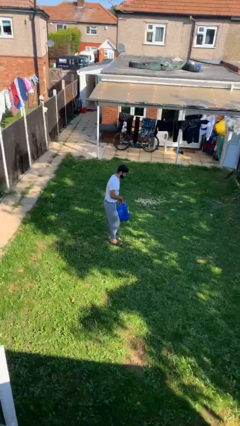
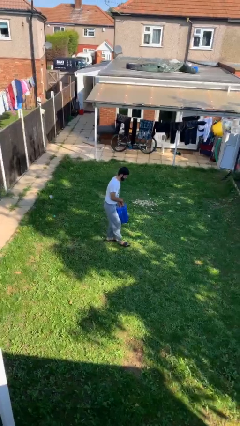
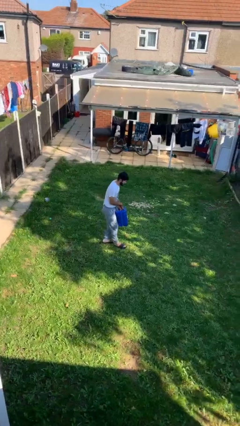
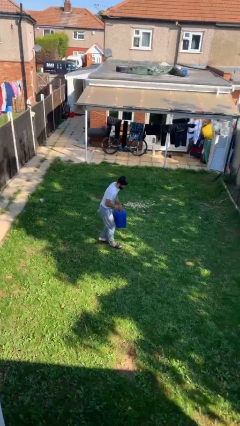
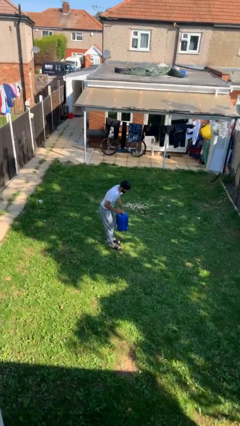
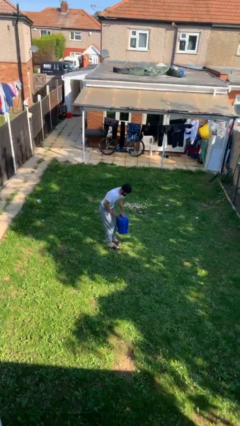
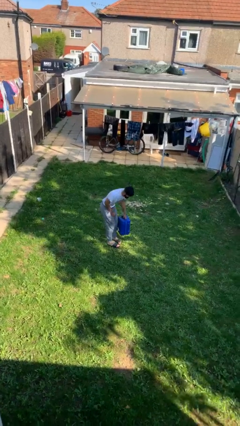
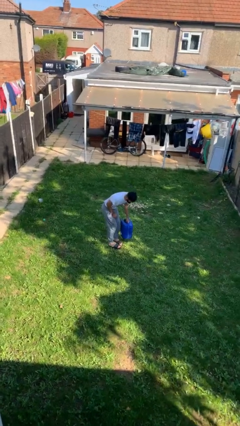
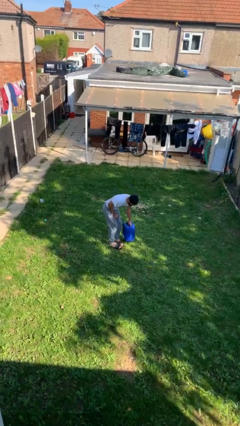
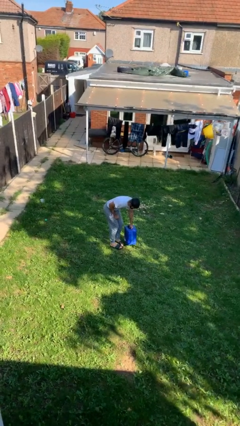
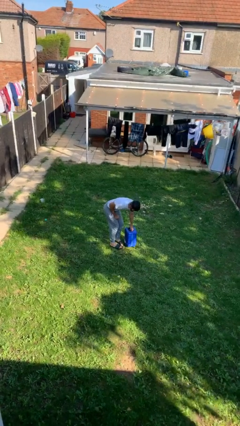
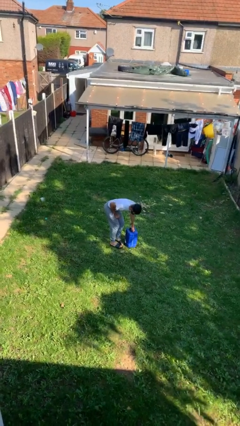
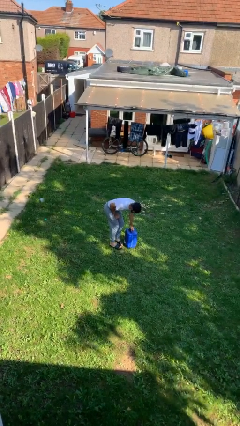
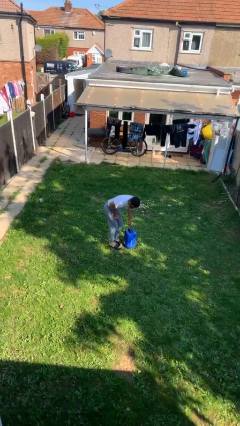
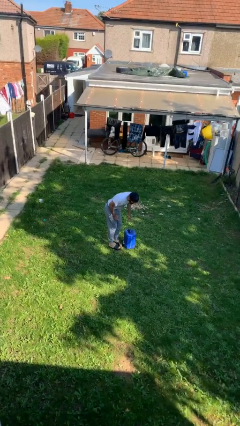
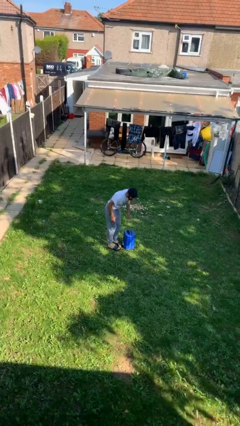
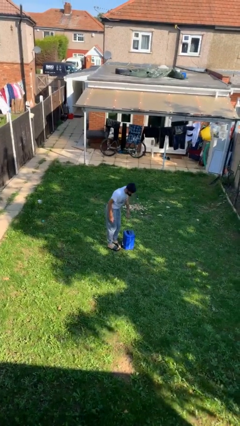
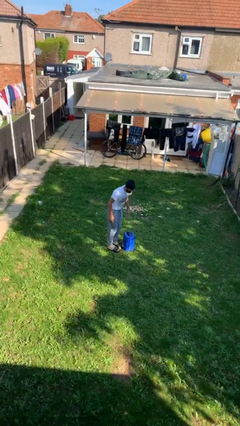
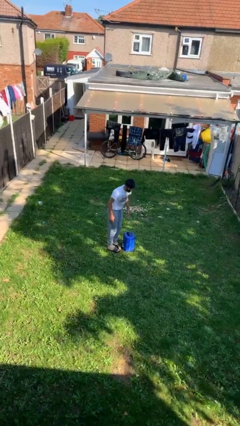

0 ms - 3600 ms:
person puts down object on floor

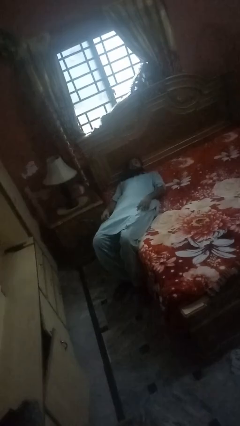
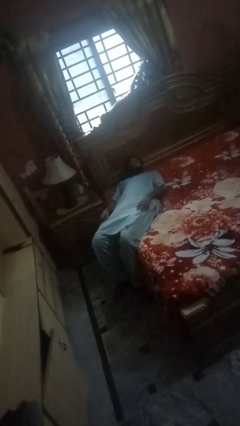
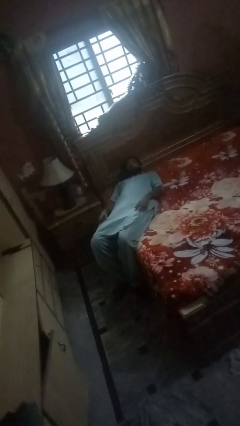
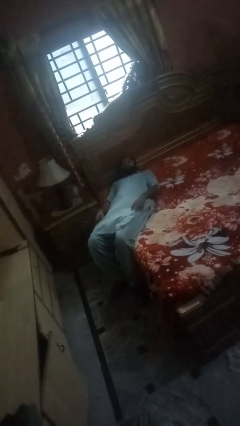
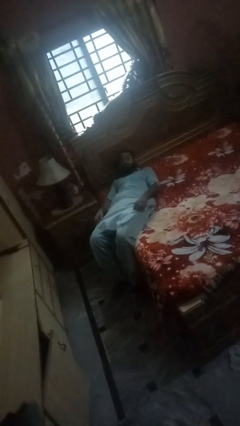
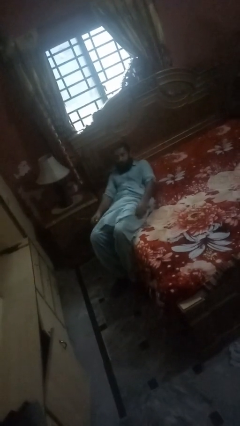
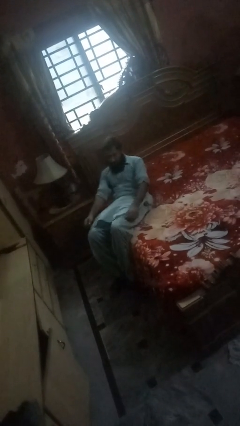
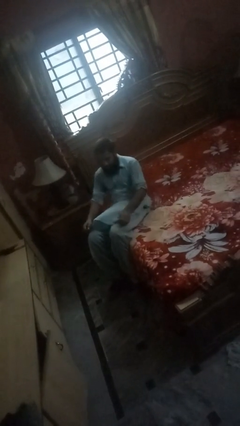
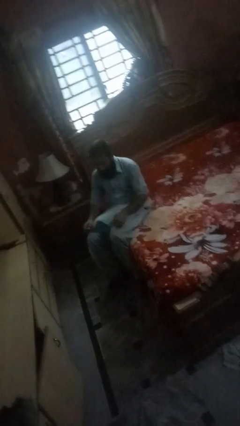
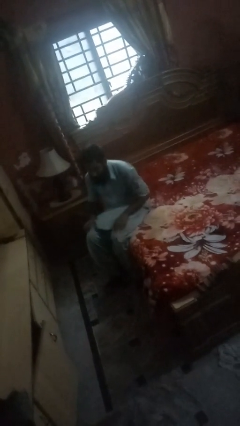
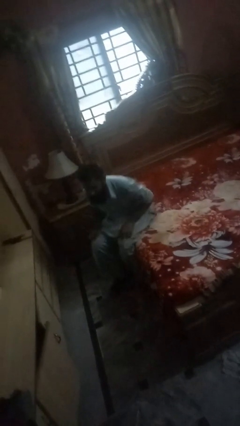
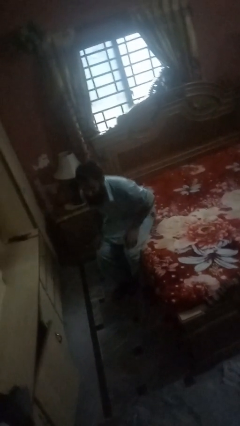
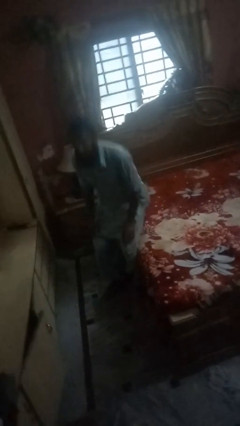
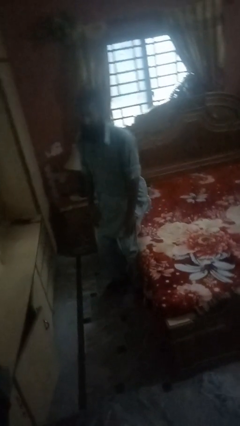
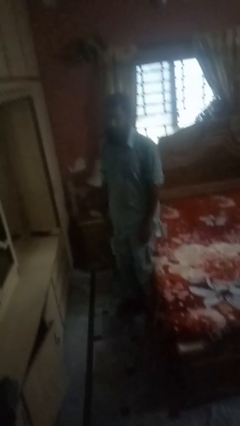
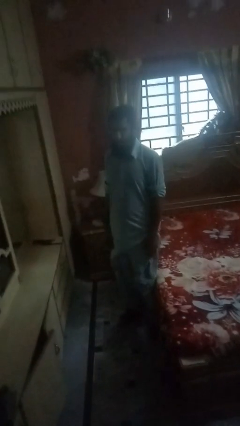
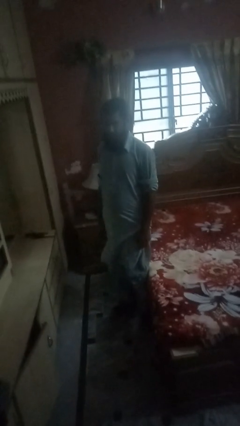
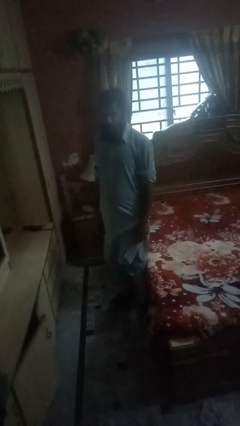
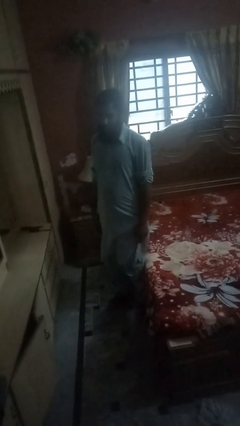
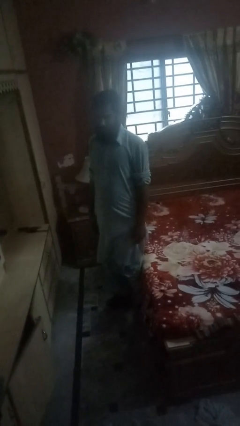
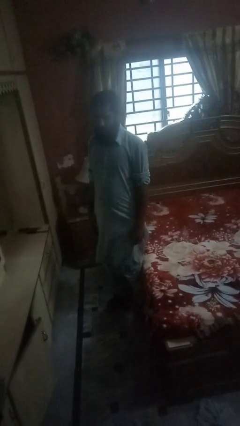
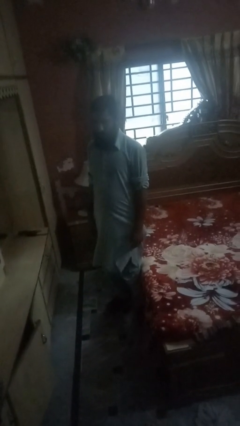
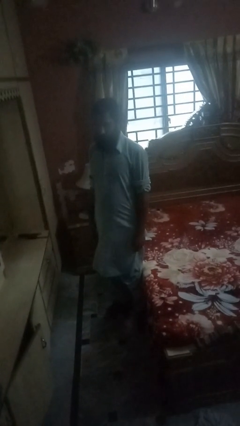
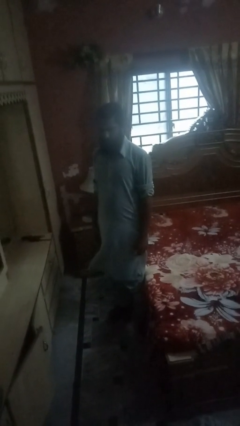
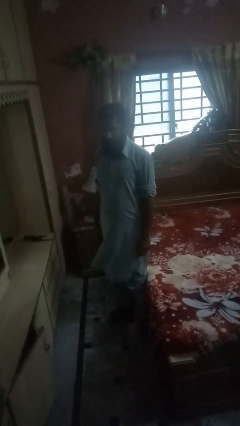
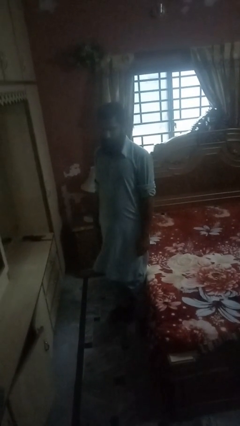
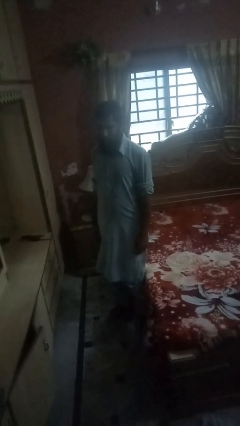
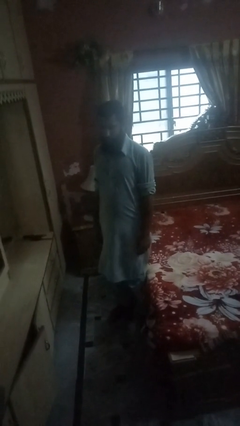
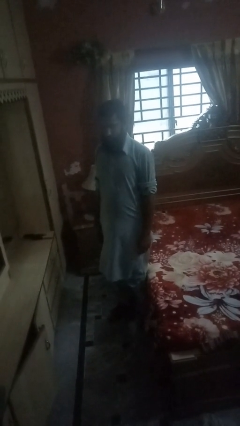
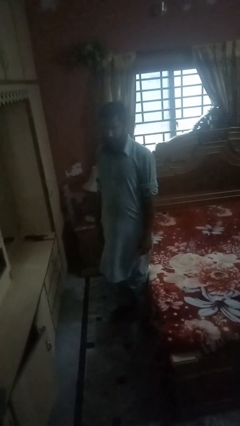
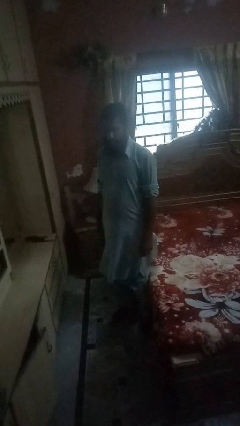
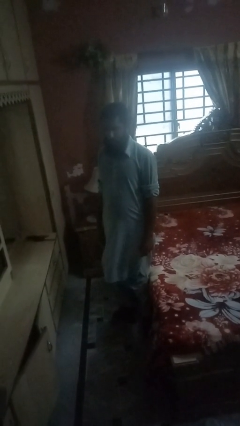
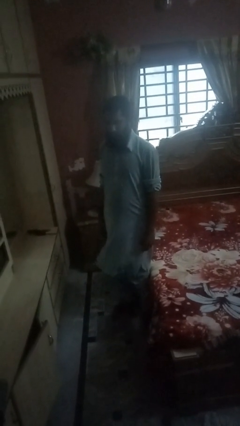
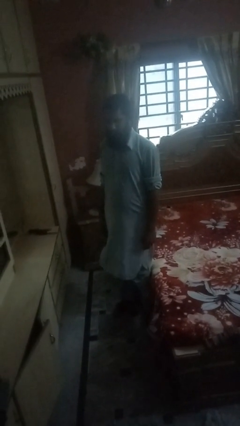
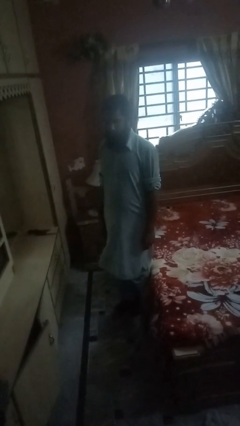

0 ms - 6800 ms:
person stands up

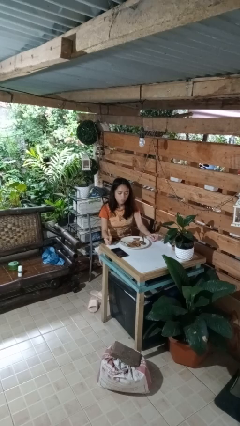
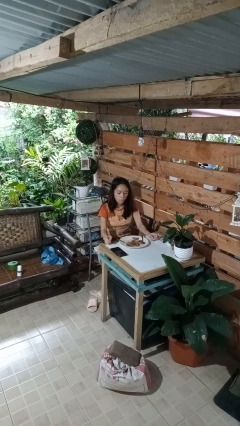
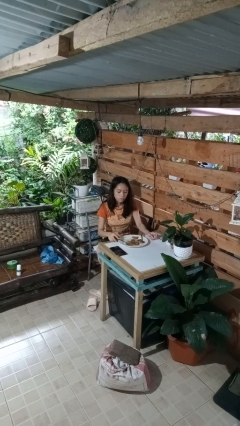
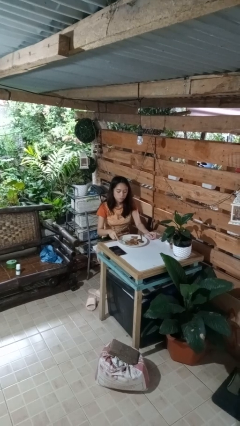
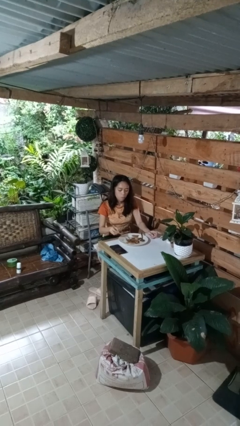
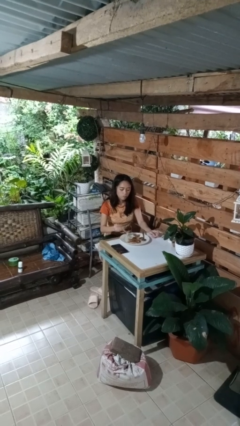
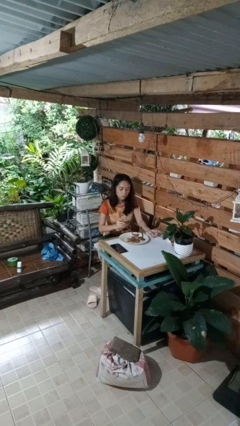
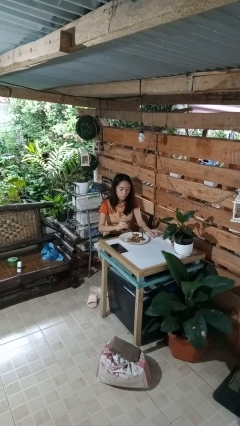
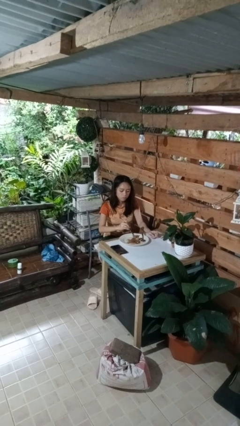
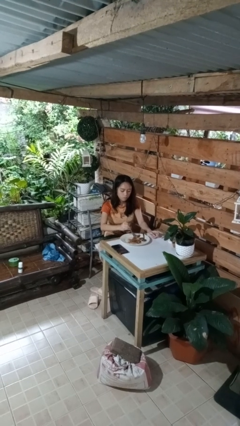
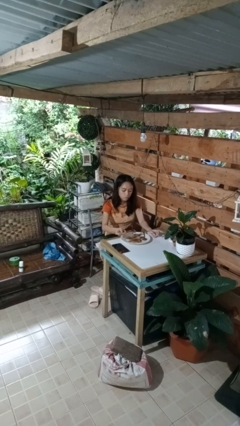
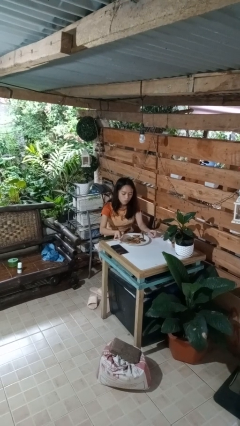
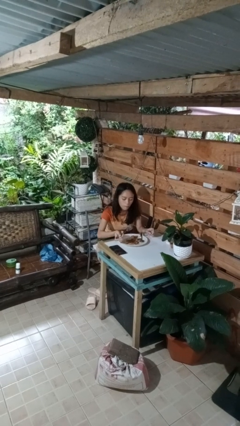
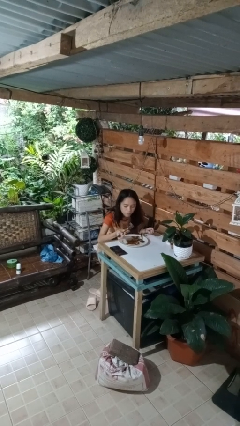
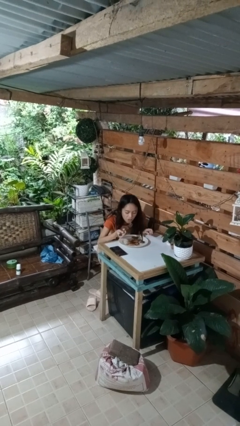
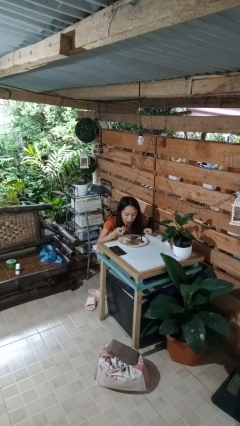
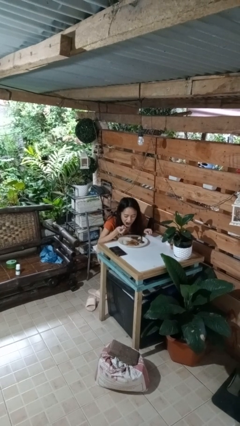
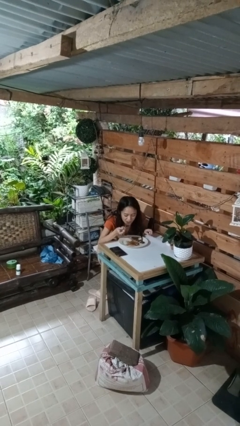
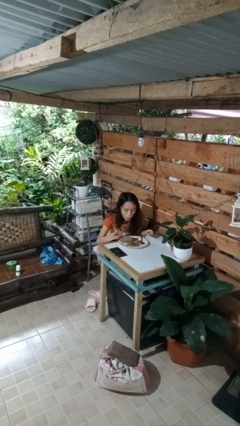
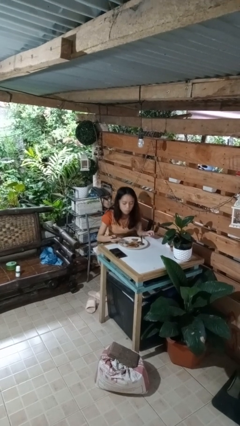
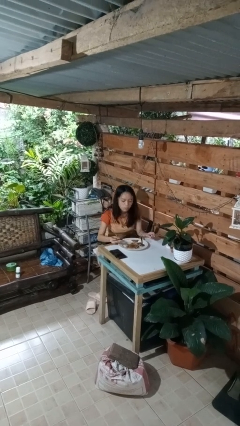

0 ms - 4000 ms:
person eats with utensil

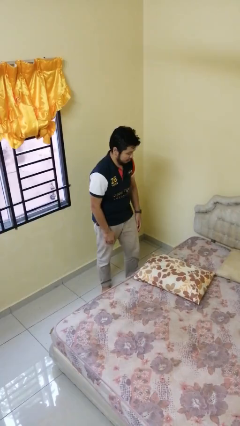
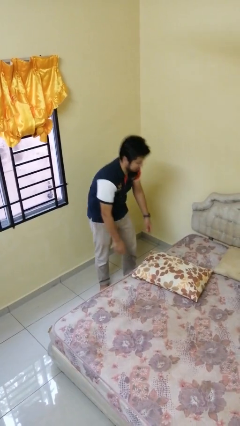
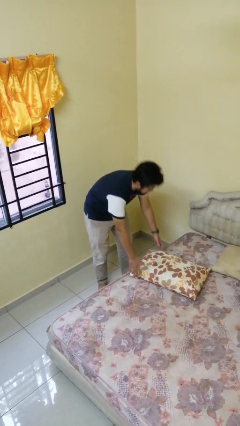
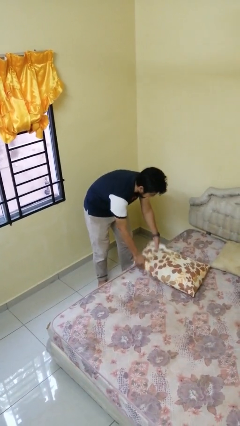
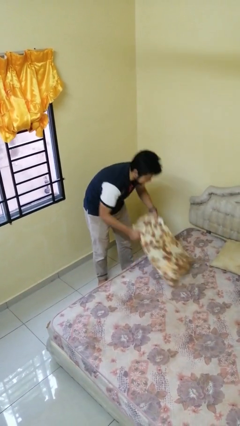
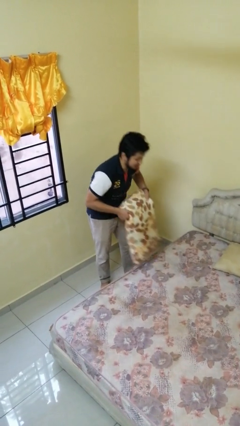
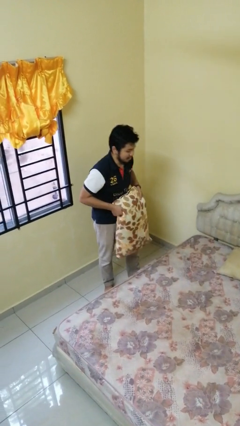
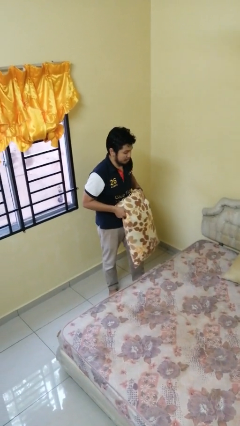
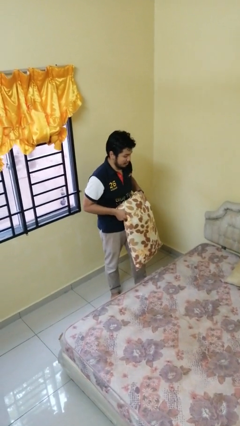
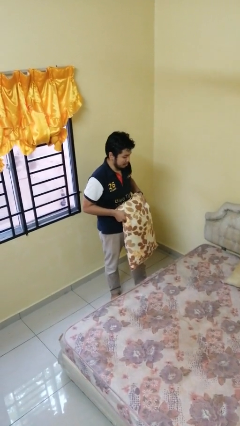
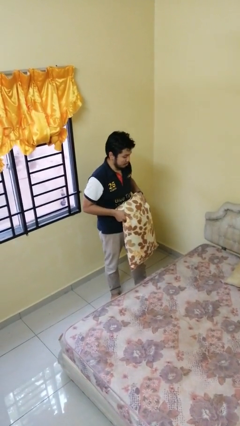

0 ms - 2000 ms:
person picks up object from bed

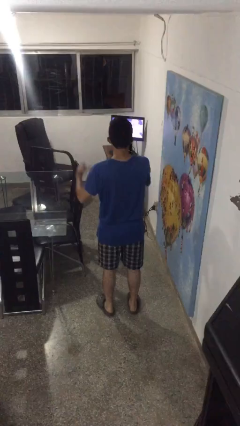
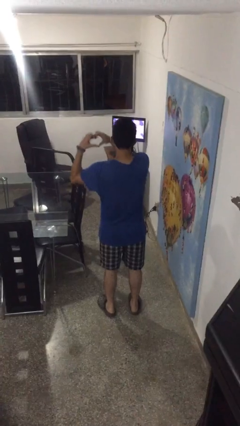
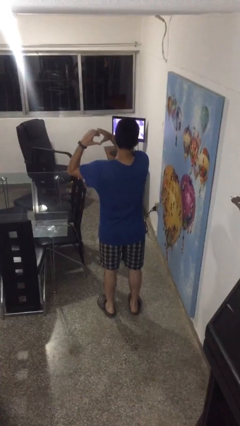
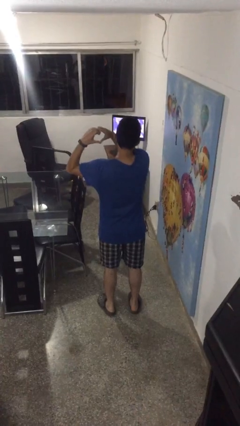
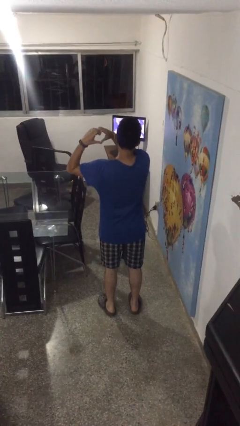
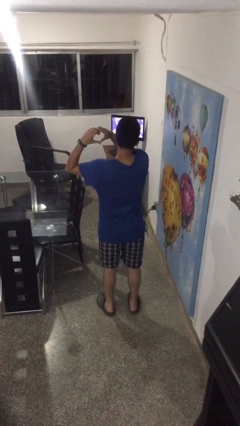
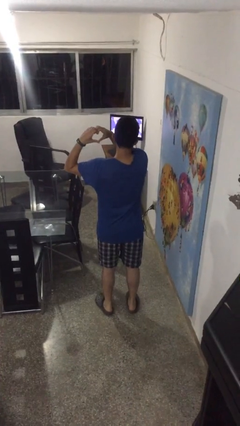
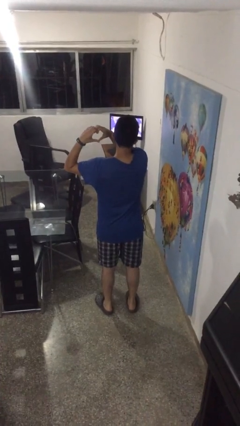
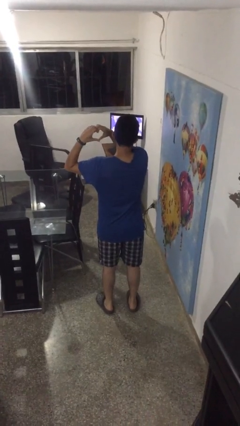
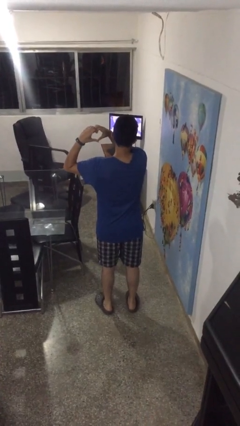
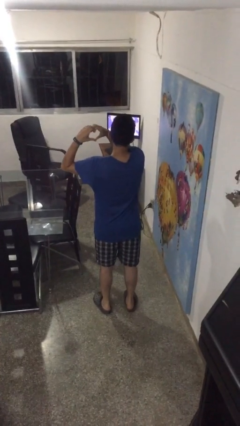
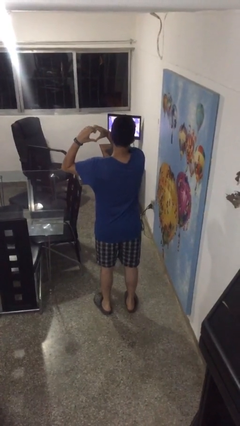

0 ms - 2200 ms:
person gestures heart
